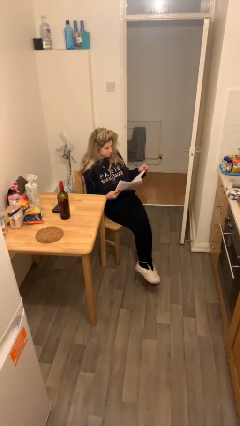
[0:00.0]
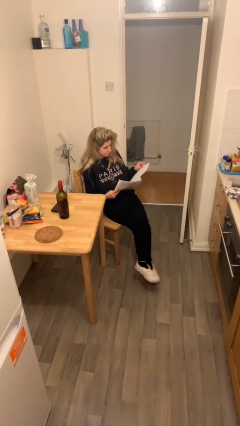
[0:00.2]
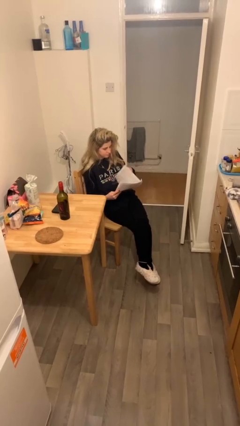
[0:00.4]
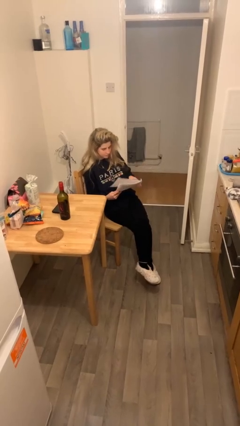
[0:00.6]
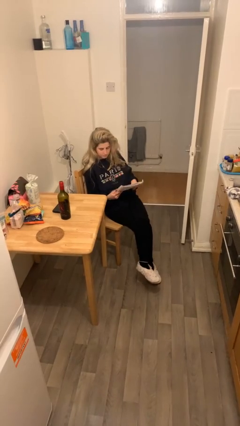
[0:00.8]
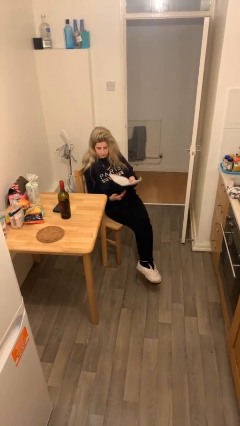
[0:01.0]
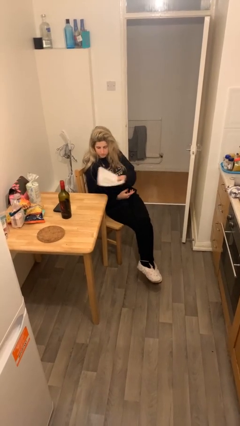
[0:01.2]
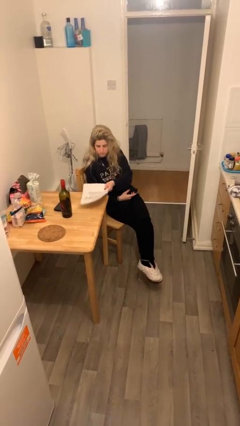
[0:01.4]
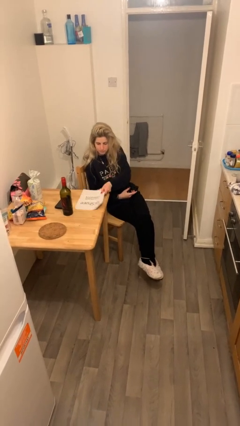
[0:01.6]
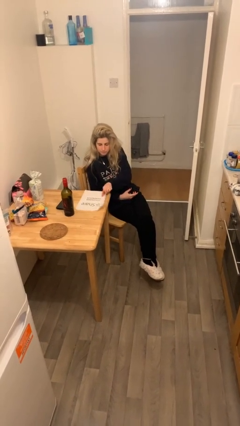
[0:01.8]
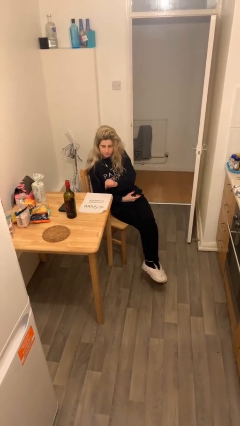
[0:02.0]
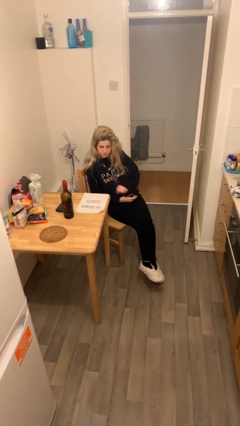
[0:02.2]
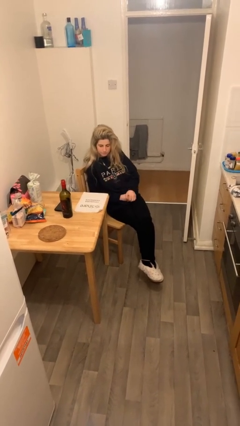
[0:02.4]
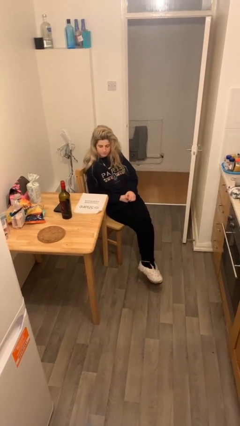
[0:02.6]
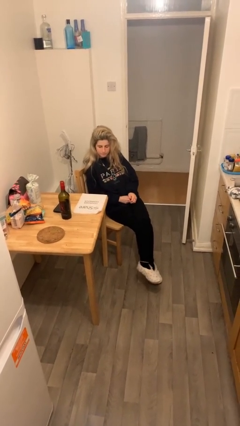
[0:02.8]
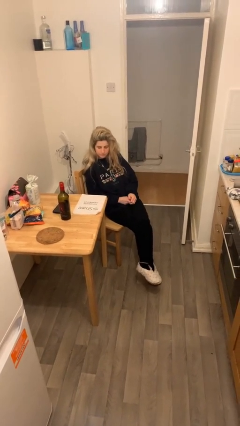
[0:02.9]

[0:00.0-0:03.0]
person puts down object on table

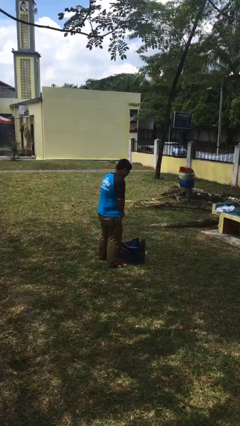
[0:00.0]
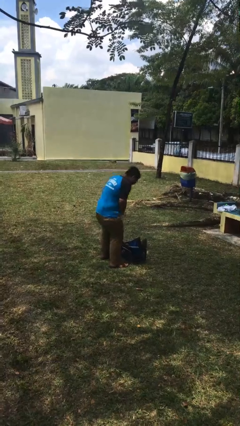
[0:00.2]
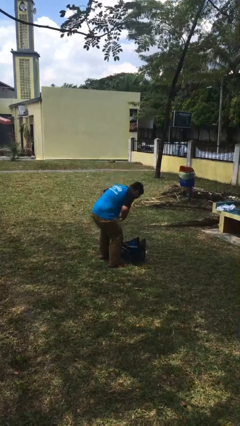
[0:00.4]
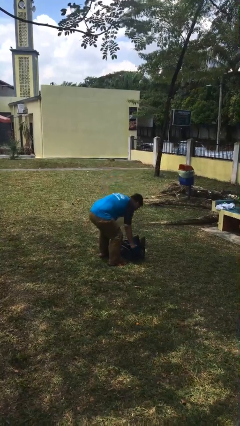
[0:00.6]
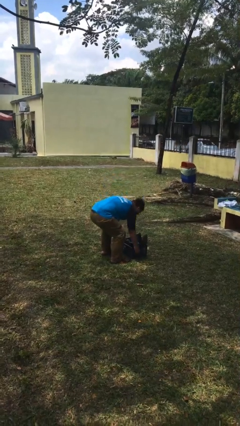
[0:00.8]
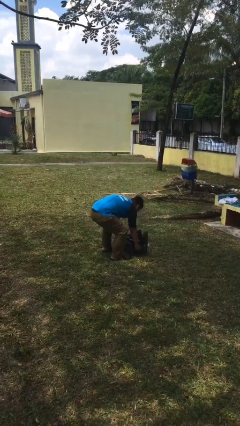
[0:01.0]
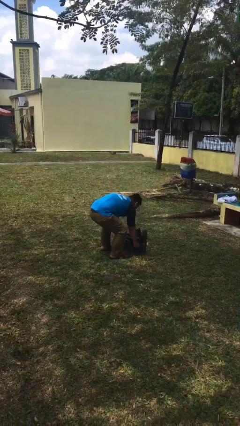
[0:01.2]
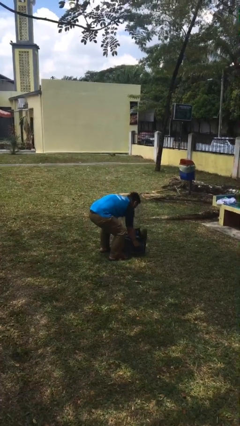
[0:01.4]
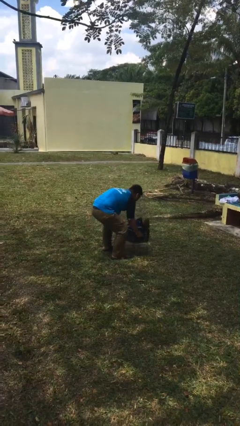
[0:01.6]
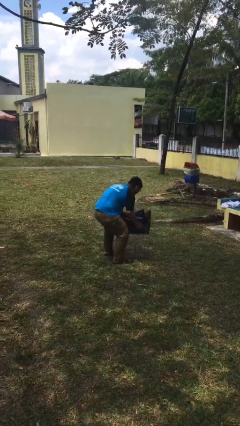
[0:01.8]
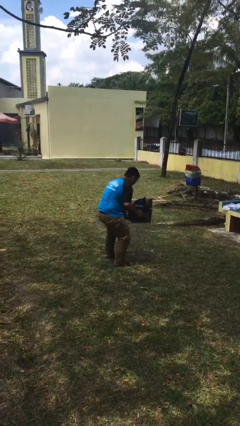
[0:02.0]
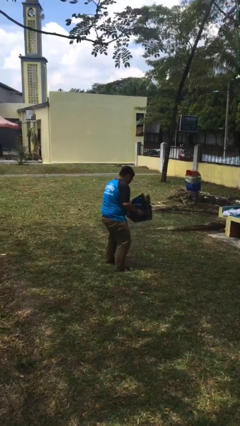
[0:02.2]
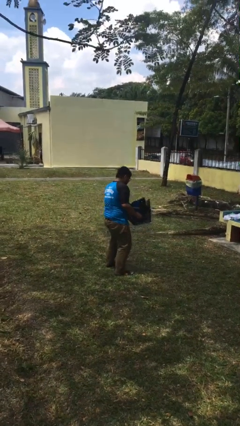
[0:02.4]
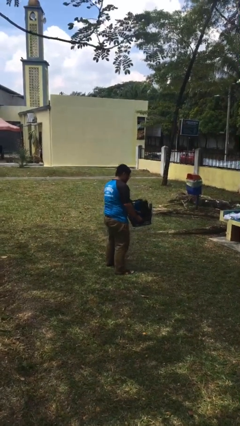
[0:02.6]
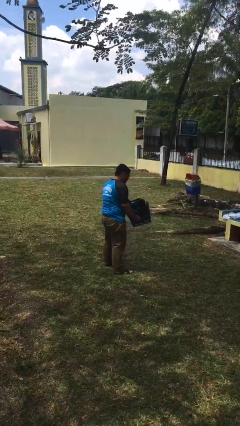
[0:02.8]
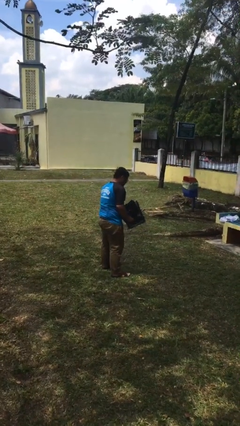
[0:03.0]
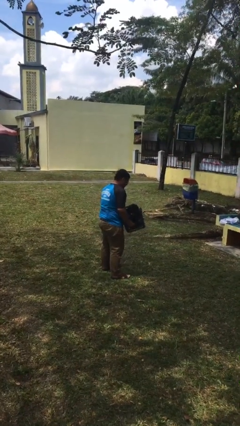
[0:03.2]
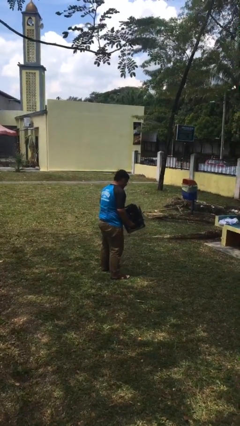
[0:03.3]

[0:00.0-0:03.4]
person picks up object from floor

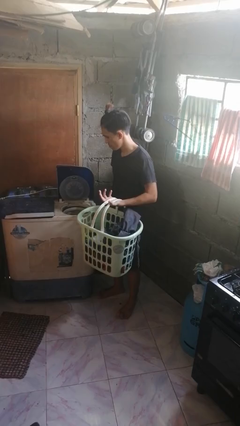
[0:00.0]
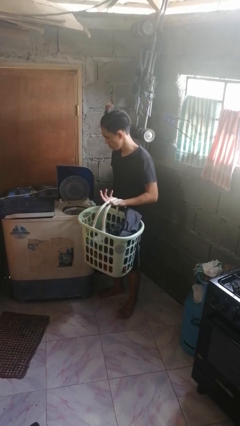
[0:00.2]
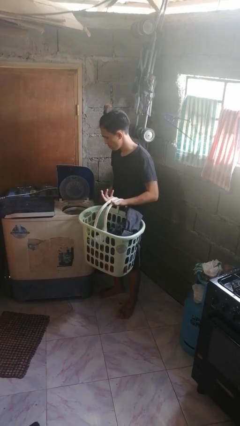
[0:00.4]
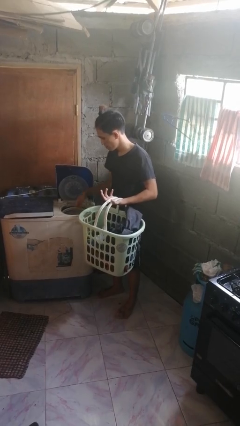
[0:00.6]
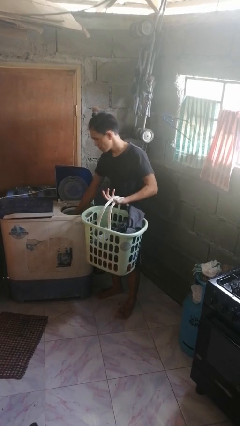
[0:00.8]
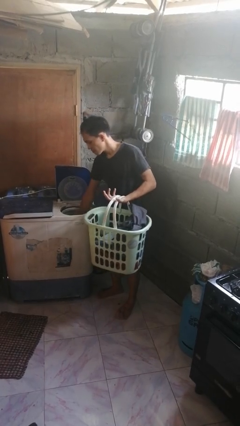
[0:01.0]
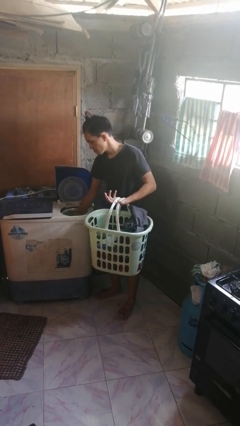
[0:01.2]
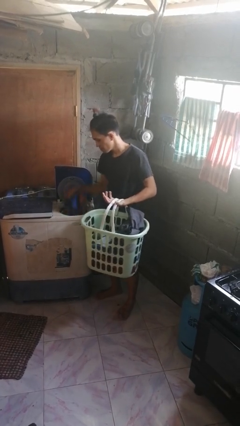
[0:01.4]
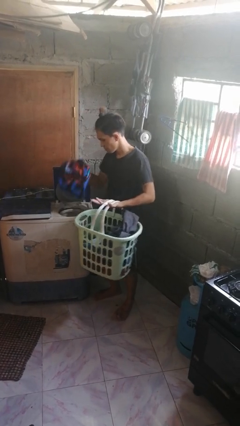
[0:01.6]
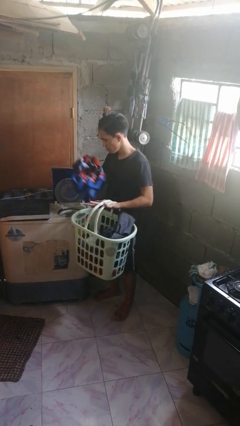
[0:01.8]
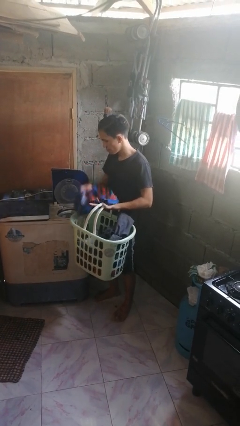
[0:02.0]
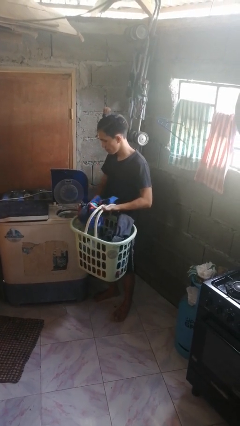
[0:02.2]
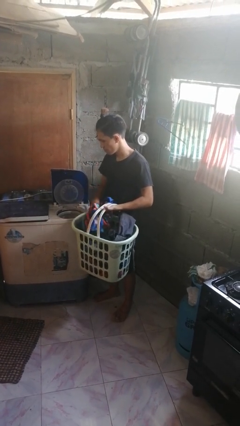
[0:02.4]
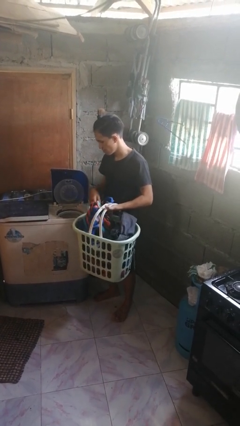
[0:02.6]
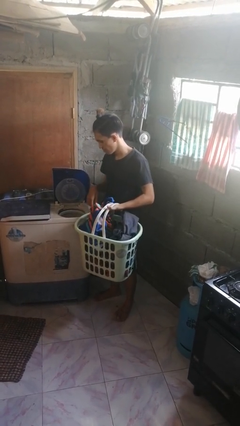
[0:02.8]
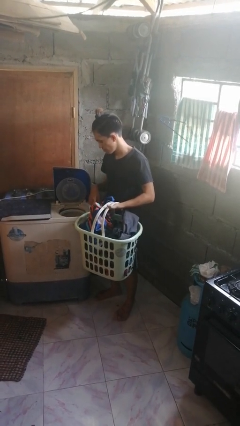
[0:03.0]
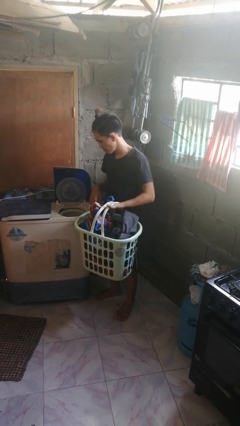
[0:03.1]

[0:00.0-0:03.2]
person unloads dryer

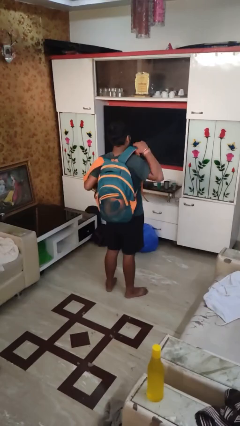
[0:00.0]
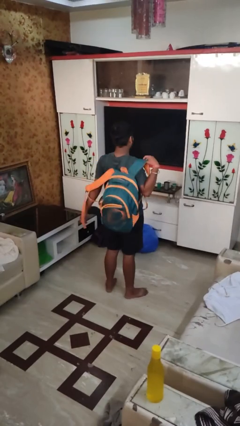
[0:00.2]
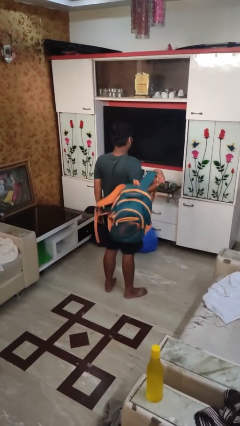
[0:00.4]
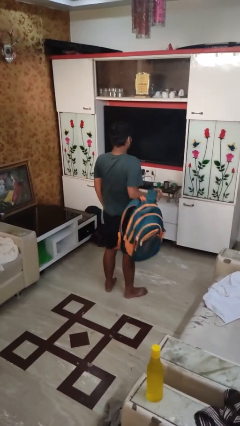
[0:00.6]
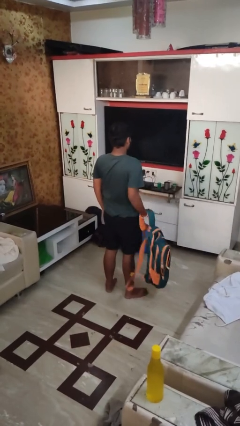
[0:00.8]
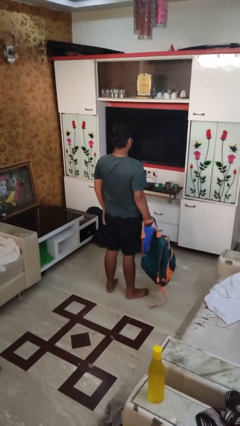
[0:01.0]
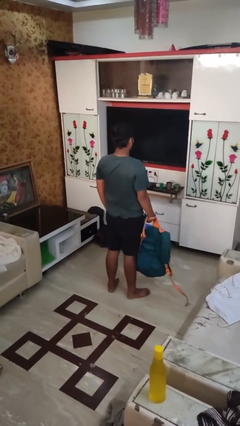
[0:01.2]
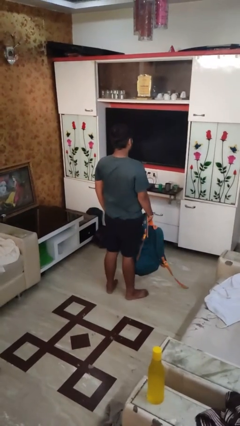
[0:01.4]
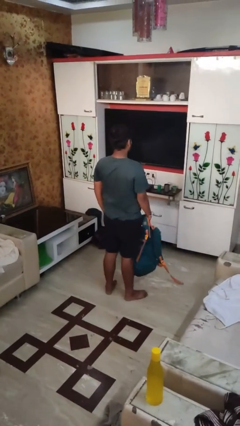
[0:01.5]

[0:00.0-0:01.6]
person takes off backpack

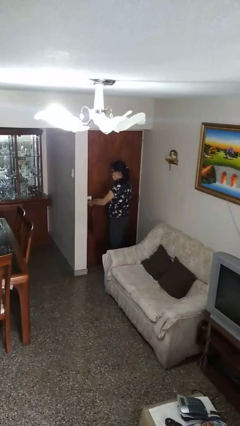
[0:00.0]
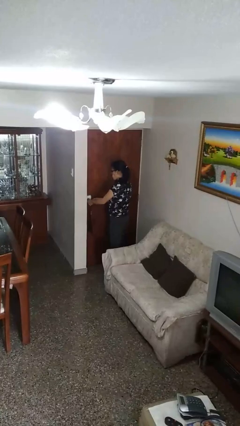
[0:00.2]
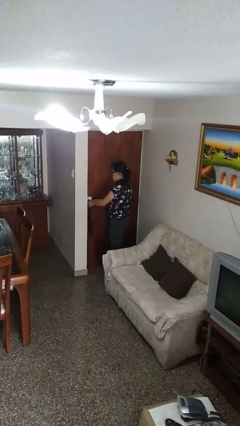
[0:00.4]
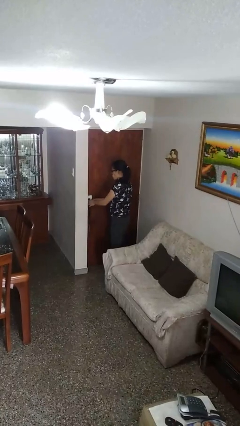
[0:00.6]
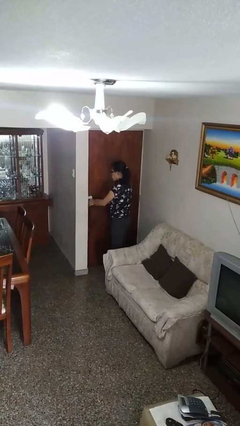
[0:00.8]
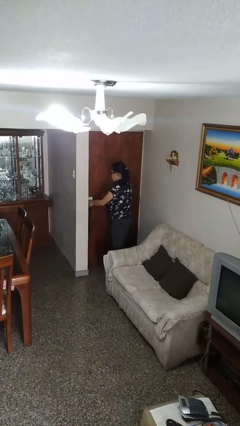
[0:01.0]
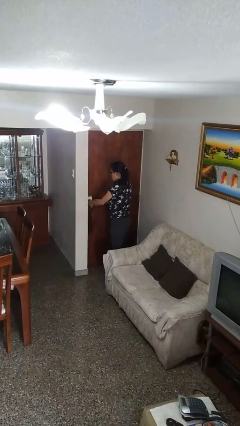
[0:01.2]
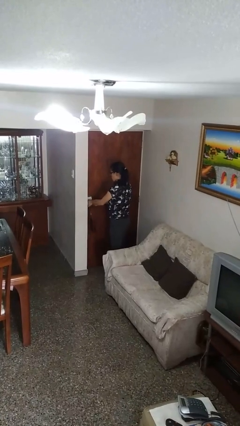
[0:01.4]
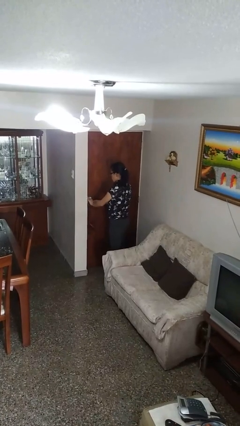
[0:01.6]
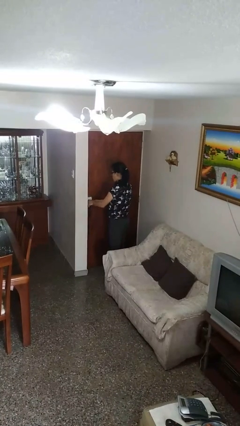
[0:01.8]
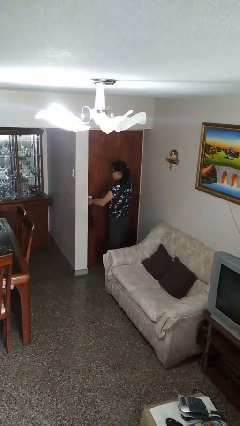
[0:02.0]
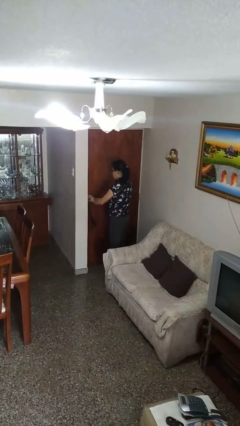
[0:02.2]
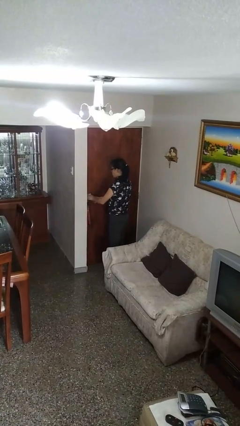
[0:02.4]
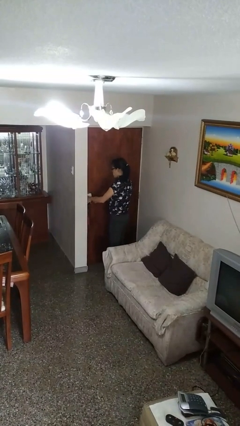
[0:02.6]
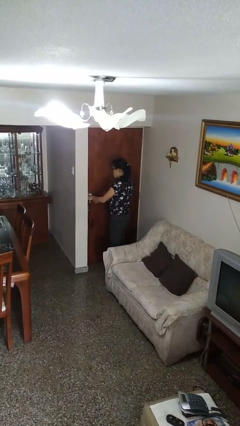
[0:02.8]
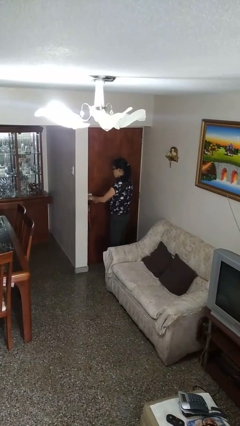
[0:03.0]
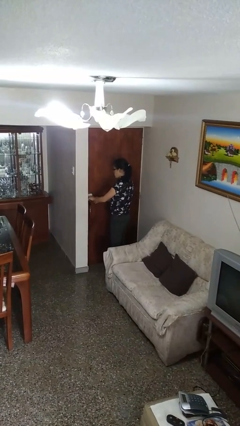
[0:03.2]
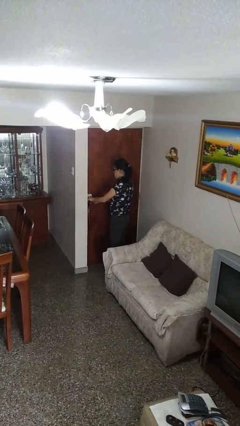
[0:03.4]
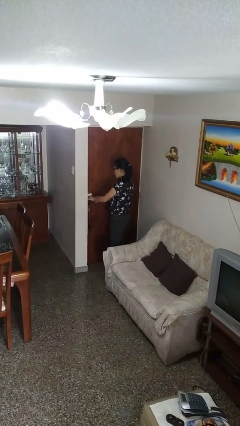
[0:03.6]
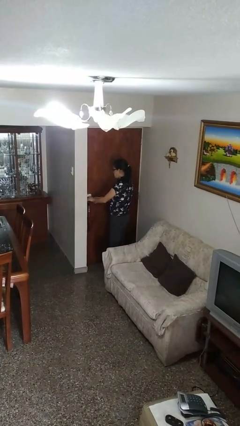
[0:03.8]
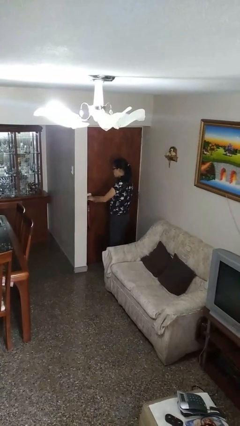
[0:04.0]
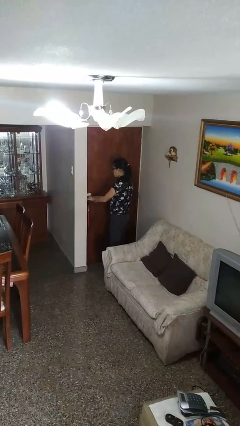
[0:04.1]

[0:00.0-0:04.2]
person unlocks door with keys

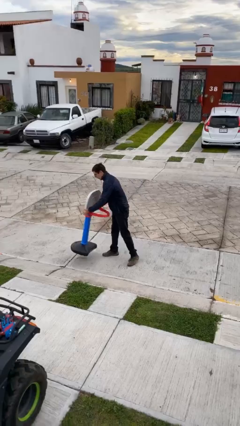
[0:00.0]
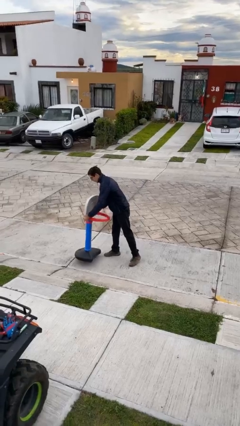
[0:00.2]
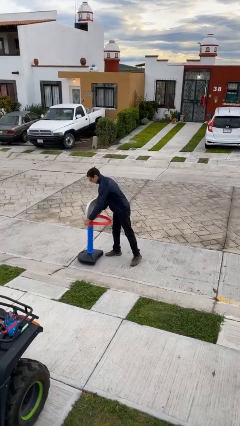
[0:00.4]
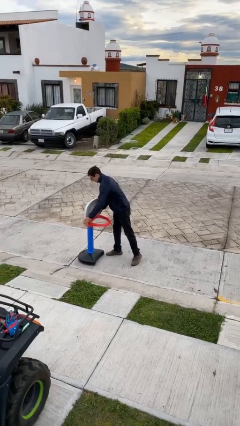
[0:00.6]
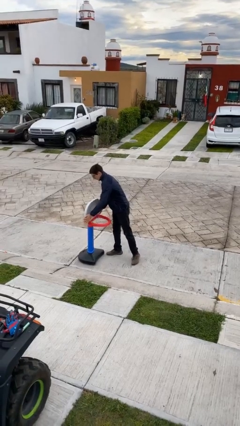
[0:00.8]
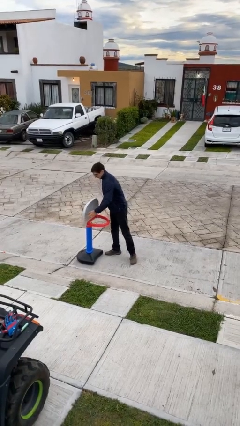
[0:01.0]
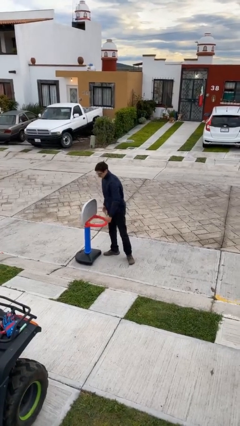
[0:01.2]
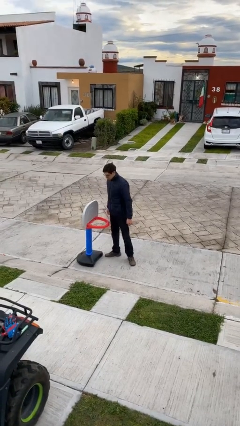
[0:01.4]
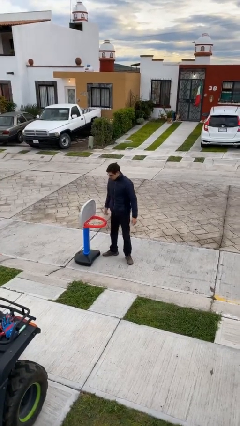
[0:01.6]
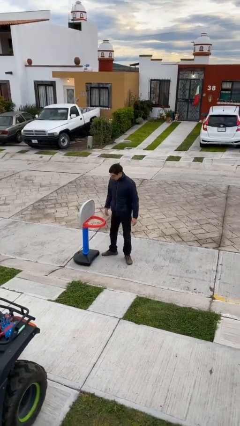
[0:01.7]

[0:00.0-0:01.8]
person puts down object on floor
